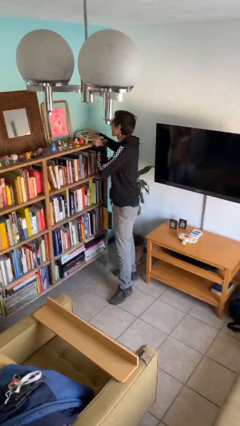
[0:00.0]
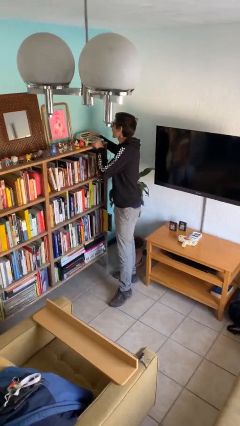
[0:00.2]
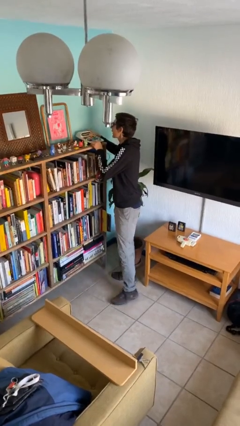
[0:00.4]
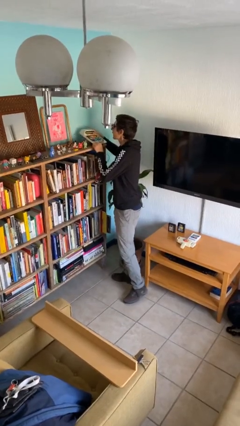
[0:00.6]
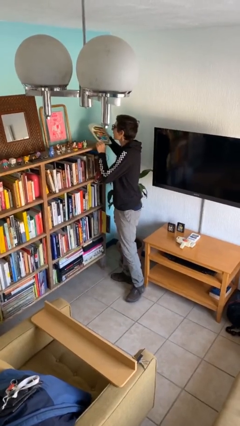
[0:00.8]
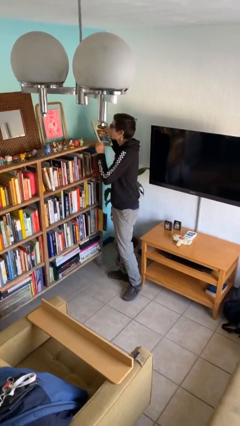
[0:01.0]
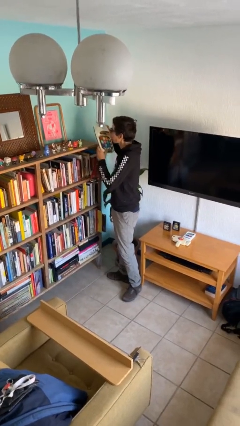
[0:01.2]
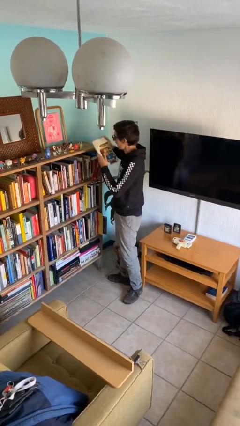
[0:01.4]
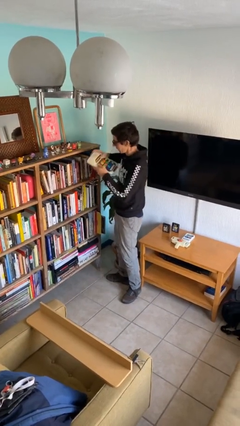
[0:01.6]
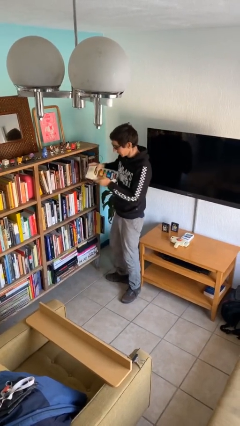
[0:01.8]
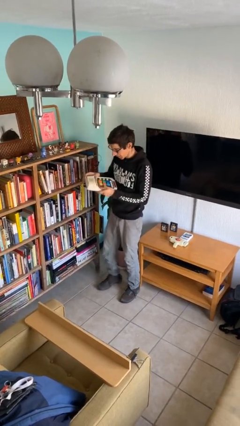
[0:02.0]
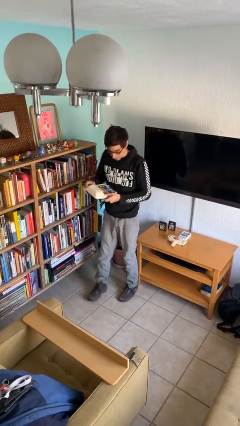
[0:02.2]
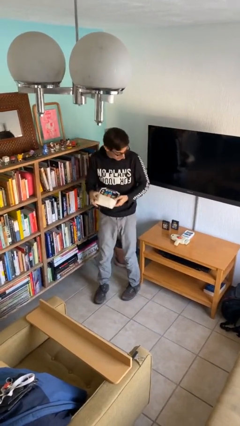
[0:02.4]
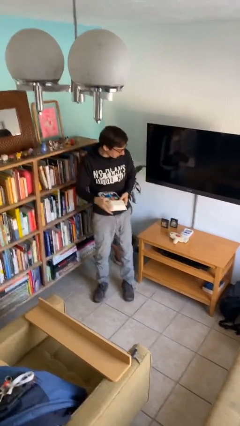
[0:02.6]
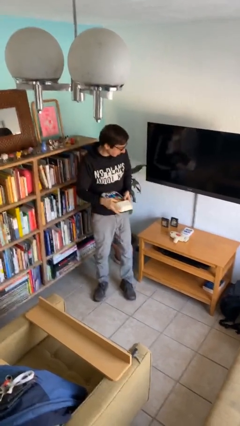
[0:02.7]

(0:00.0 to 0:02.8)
person picks up object from shelf

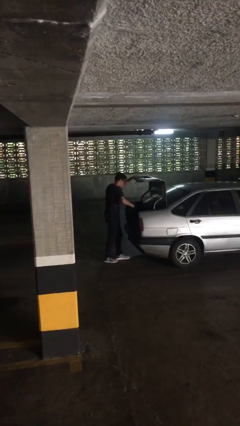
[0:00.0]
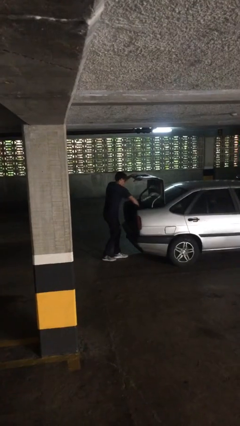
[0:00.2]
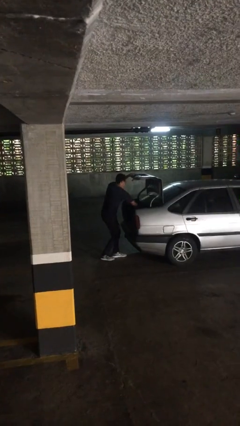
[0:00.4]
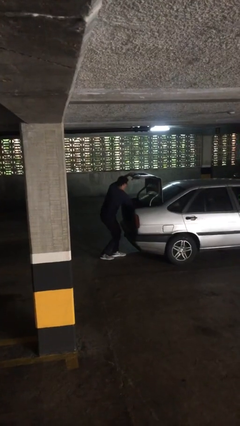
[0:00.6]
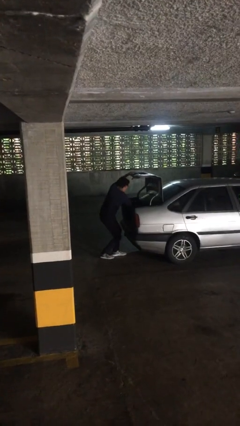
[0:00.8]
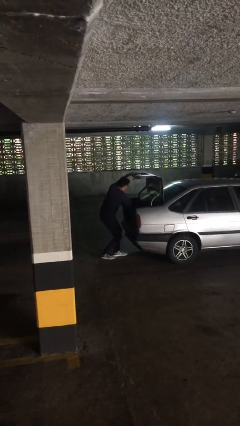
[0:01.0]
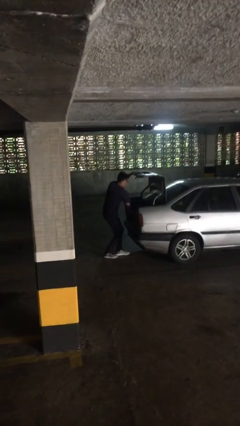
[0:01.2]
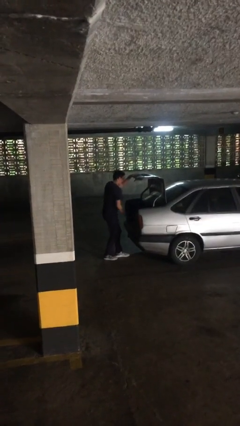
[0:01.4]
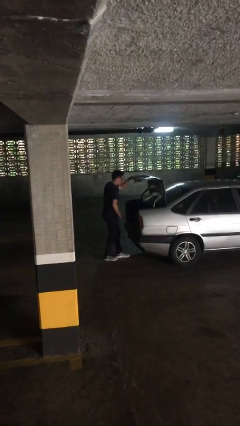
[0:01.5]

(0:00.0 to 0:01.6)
person loads car

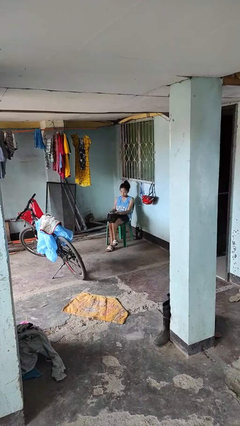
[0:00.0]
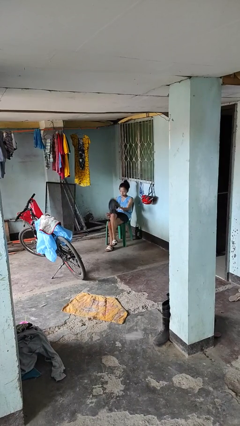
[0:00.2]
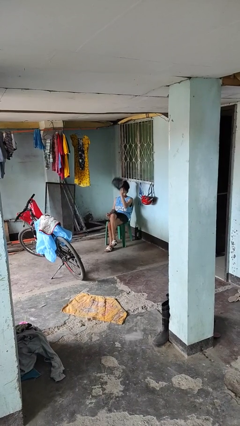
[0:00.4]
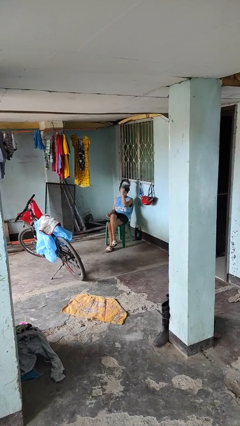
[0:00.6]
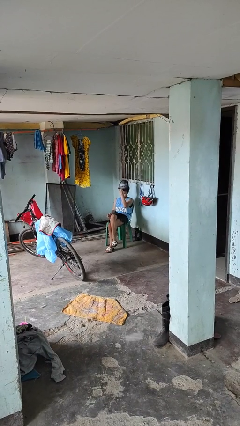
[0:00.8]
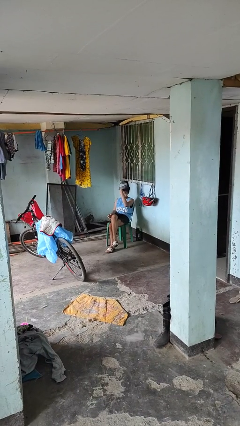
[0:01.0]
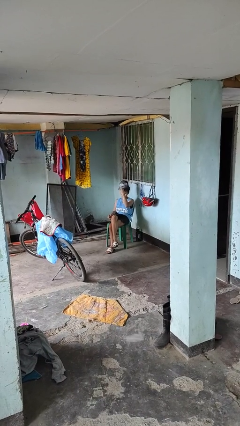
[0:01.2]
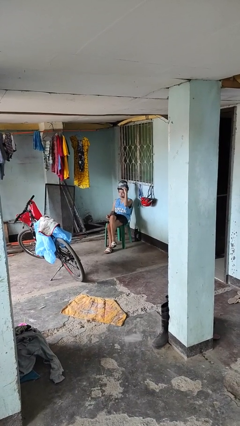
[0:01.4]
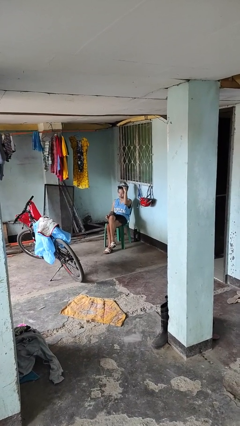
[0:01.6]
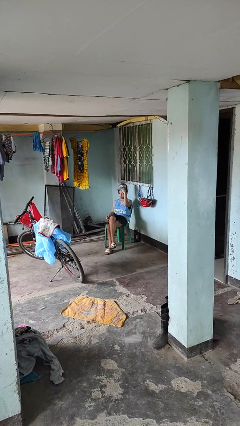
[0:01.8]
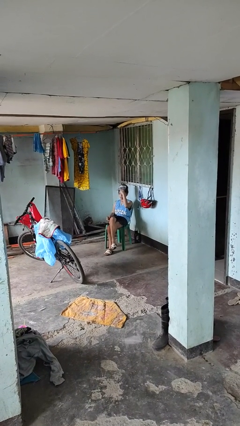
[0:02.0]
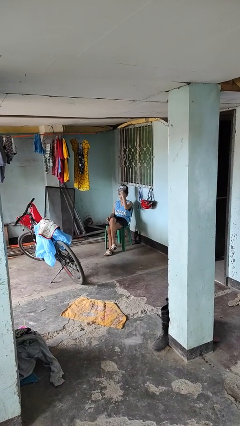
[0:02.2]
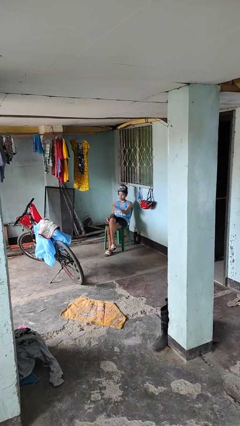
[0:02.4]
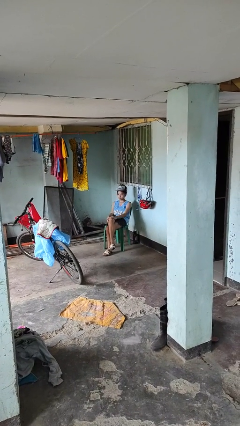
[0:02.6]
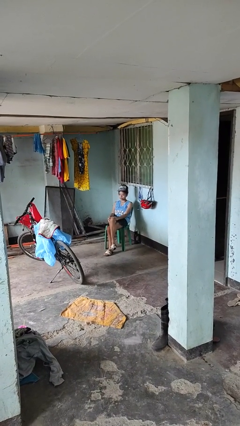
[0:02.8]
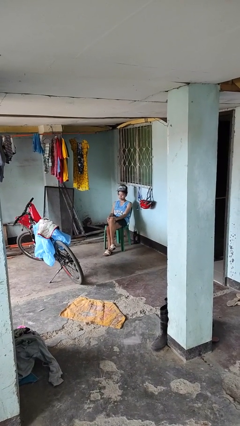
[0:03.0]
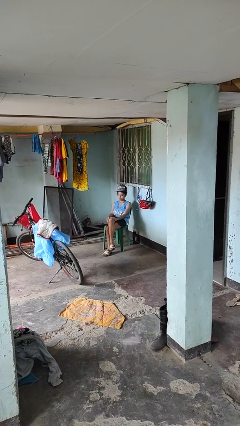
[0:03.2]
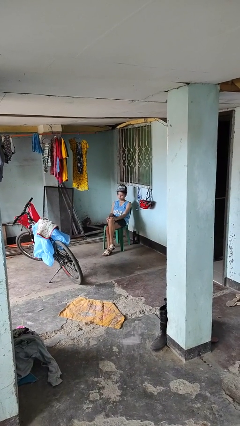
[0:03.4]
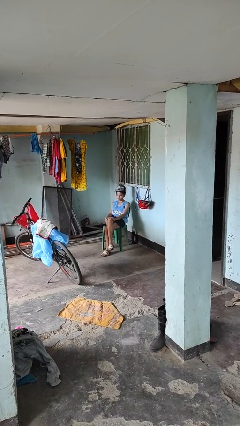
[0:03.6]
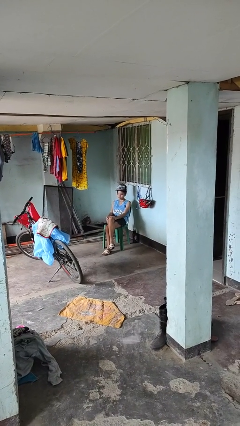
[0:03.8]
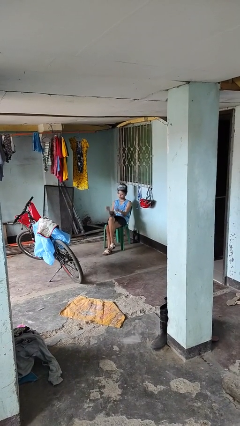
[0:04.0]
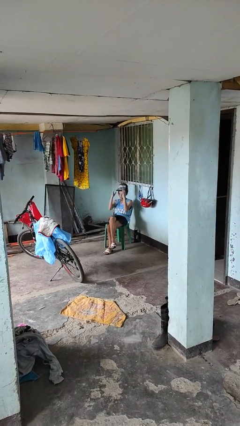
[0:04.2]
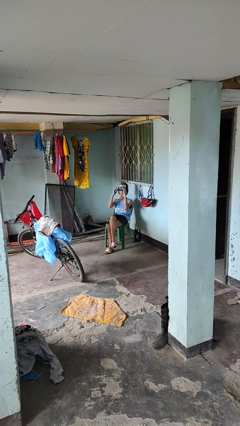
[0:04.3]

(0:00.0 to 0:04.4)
person puts on hat

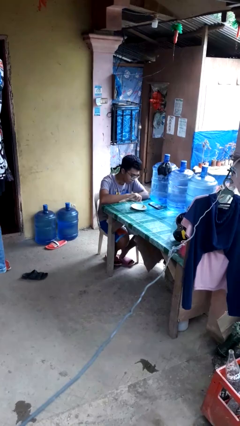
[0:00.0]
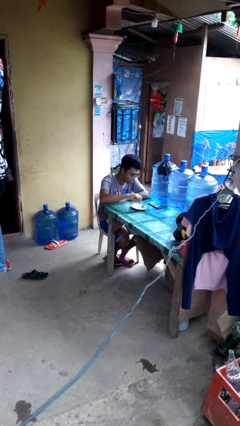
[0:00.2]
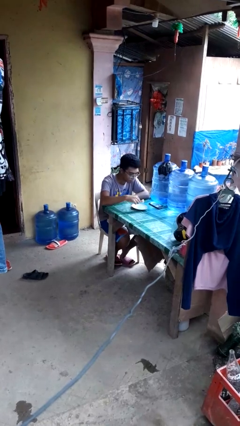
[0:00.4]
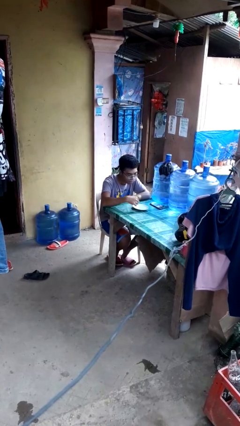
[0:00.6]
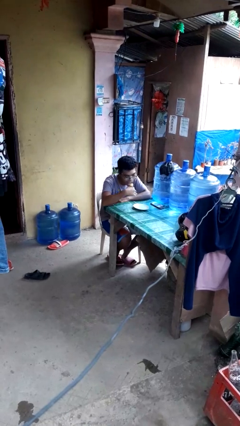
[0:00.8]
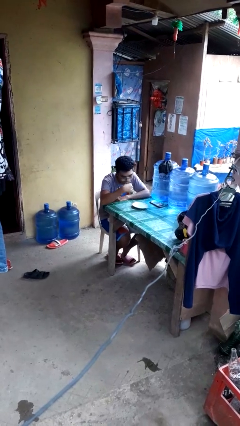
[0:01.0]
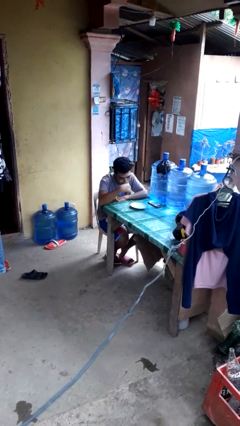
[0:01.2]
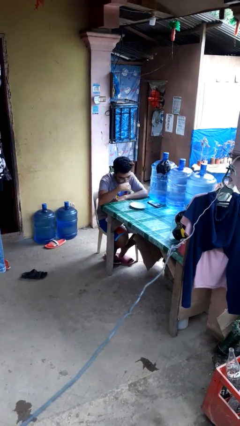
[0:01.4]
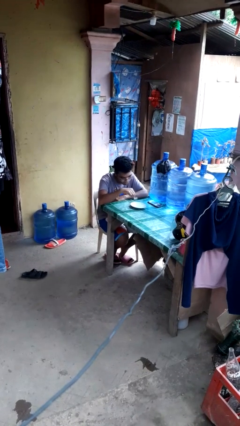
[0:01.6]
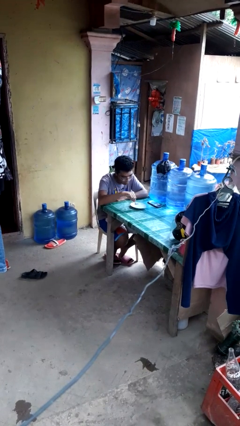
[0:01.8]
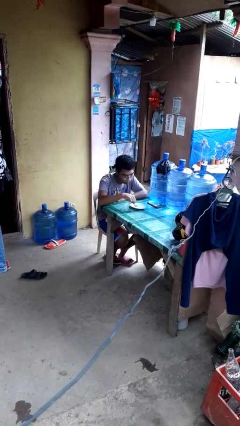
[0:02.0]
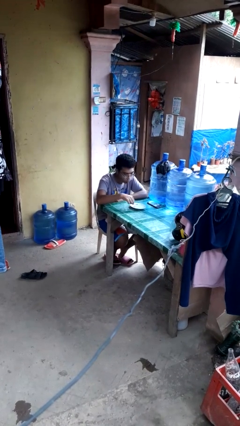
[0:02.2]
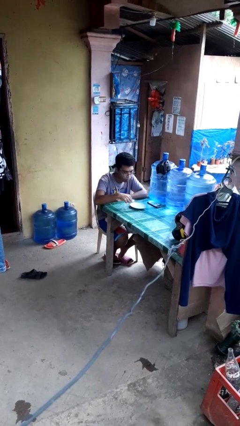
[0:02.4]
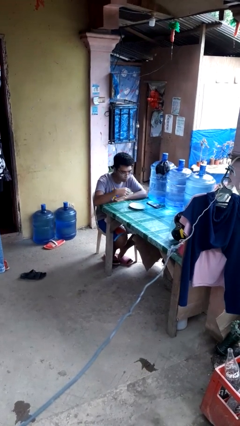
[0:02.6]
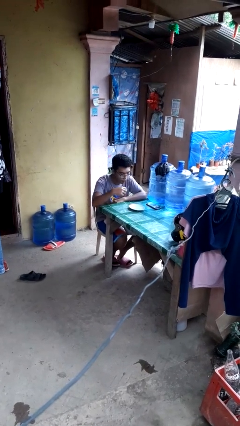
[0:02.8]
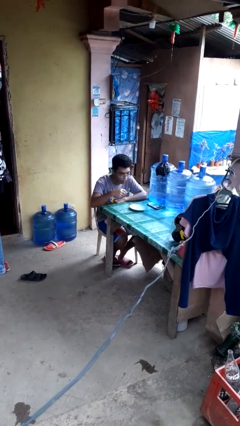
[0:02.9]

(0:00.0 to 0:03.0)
person eats with utensil

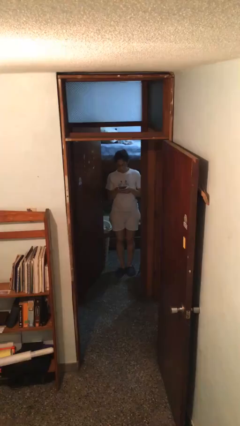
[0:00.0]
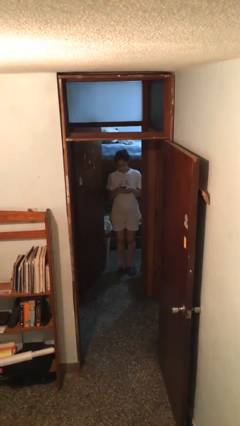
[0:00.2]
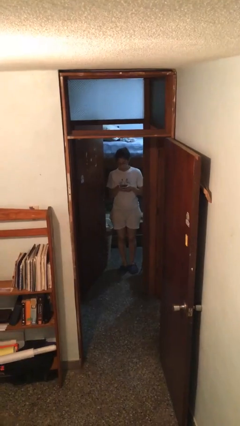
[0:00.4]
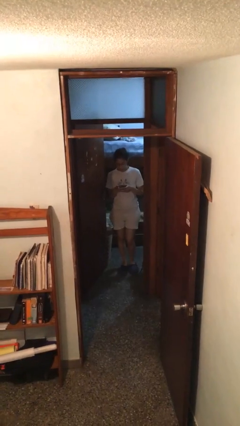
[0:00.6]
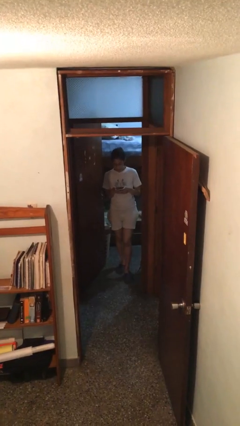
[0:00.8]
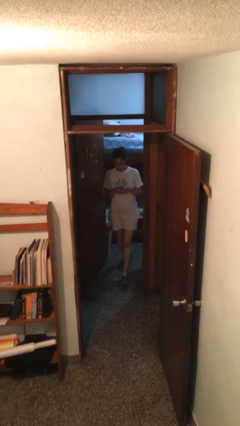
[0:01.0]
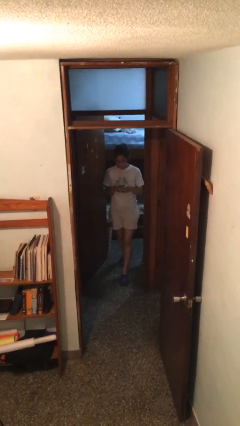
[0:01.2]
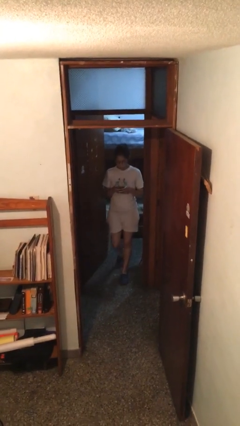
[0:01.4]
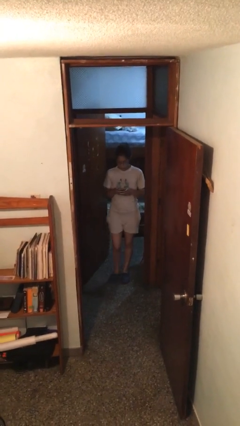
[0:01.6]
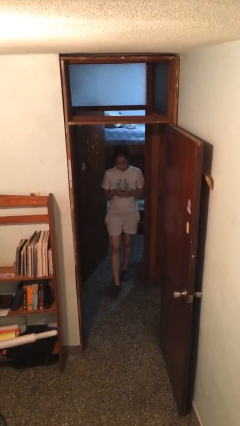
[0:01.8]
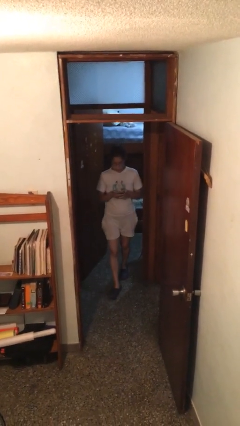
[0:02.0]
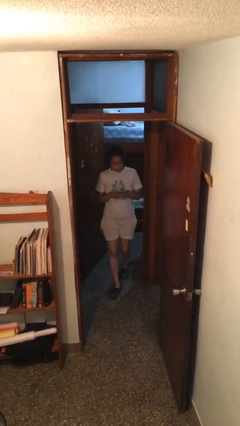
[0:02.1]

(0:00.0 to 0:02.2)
person enters scene through structure

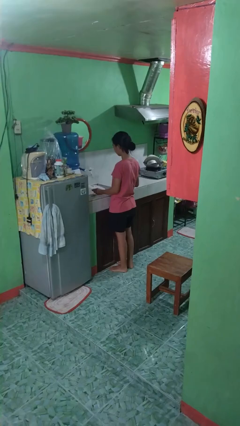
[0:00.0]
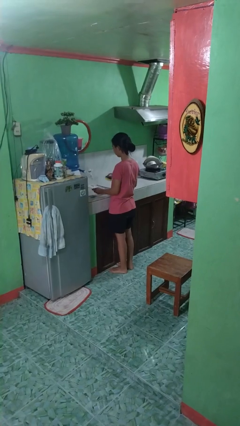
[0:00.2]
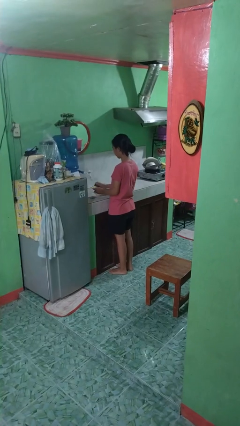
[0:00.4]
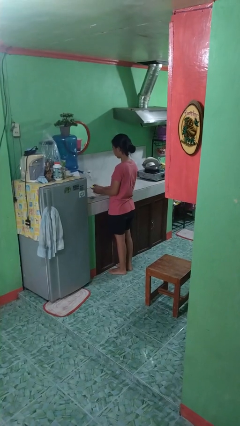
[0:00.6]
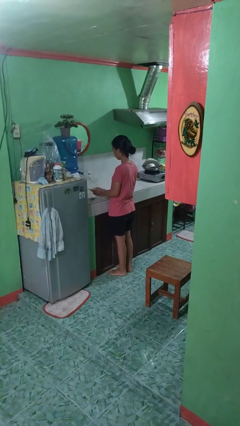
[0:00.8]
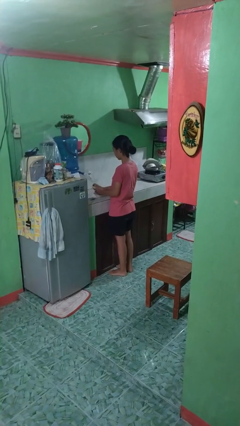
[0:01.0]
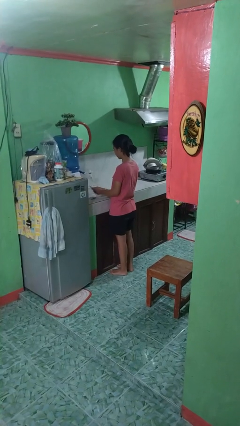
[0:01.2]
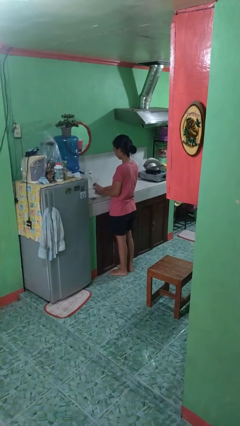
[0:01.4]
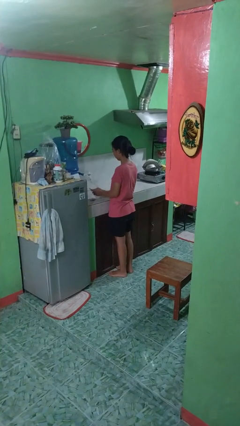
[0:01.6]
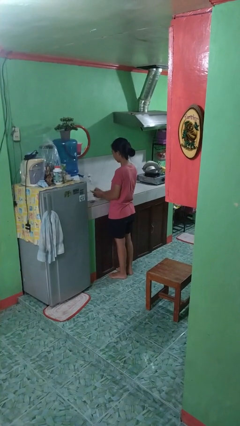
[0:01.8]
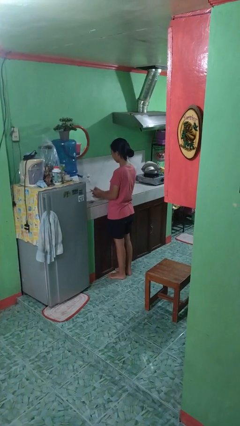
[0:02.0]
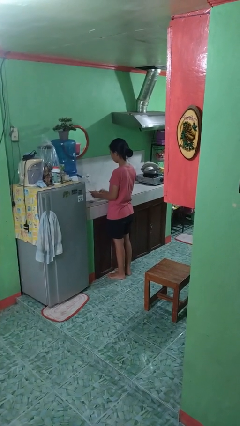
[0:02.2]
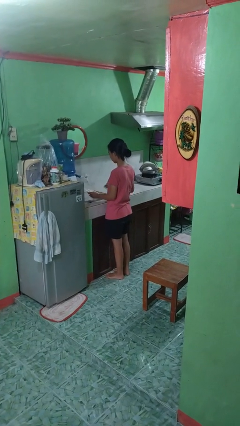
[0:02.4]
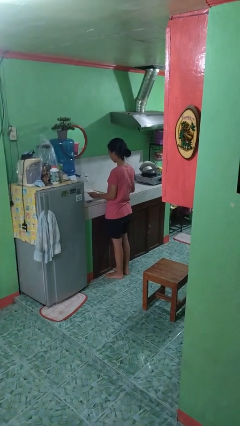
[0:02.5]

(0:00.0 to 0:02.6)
person washes dish

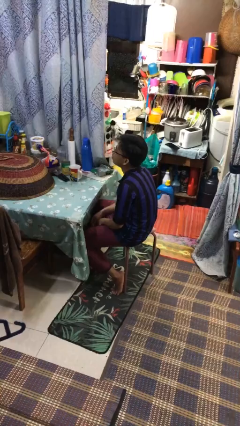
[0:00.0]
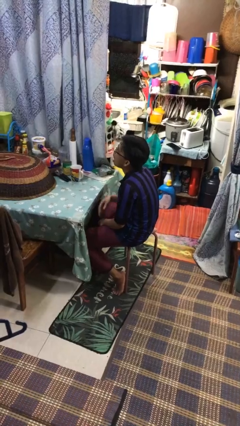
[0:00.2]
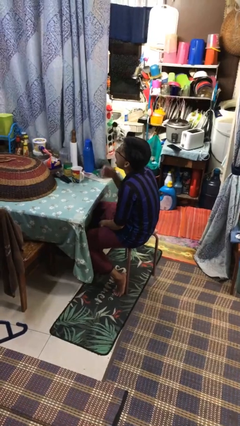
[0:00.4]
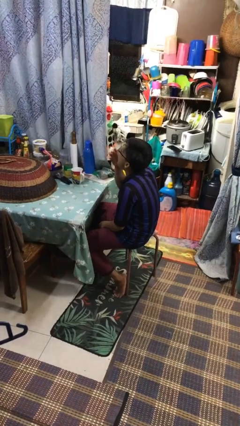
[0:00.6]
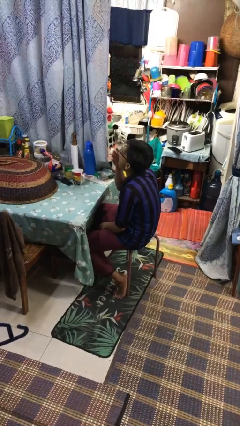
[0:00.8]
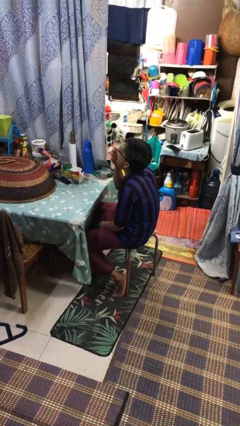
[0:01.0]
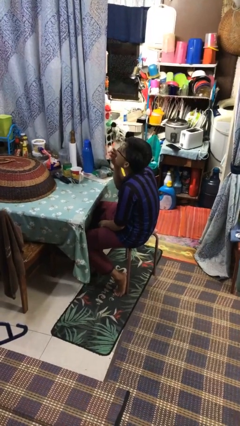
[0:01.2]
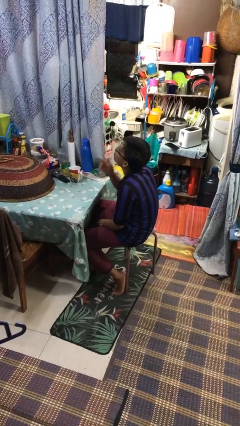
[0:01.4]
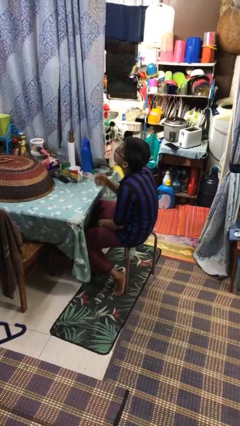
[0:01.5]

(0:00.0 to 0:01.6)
person yawns
